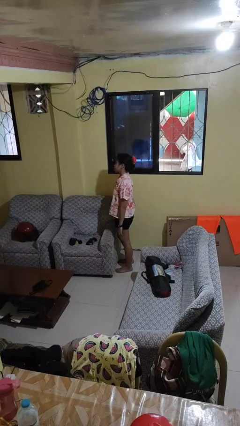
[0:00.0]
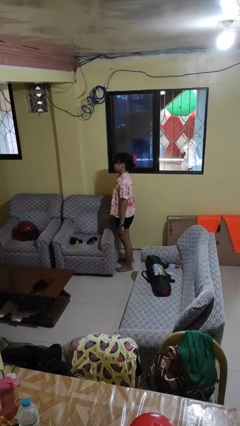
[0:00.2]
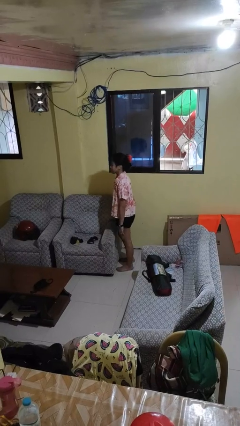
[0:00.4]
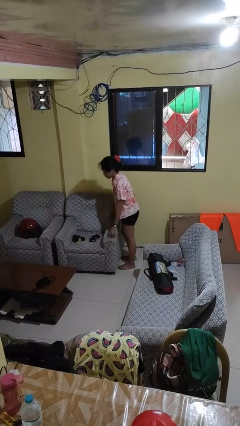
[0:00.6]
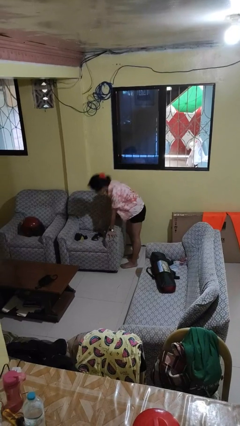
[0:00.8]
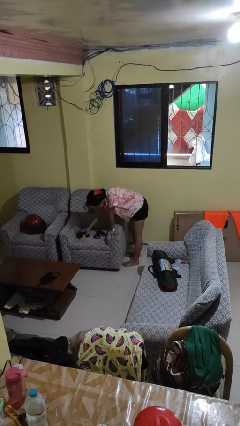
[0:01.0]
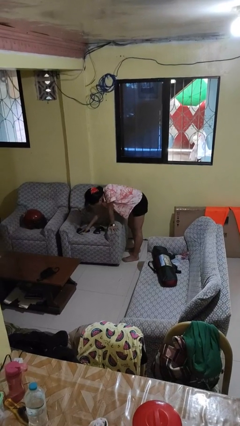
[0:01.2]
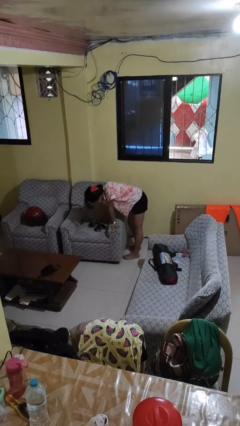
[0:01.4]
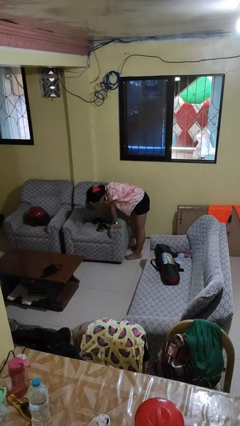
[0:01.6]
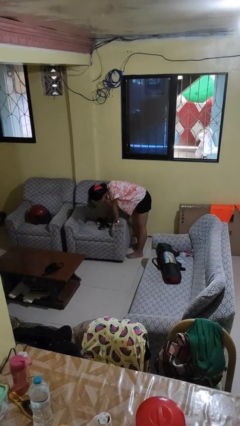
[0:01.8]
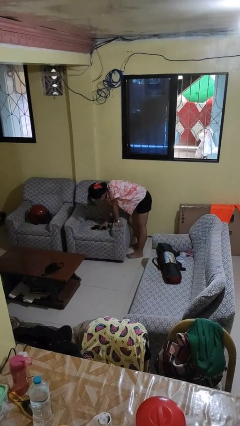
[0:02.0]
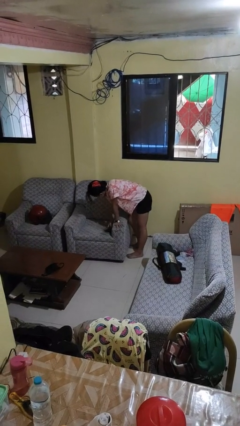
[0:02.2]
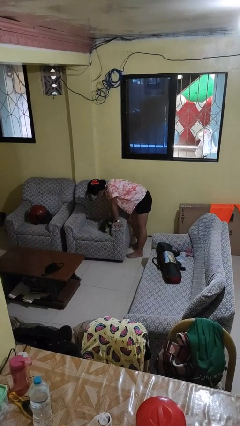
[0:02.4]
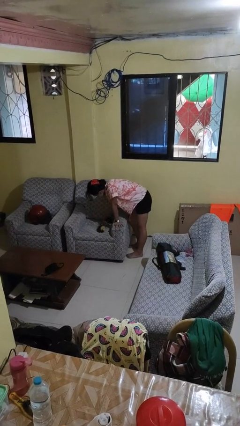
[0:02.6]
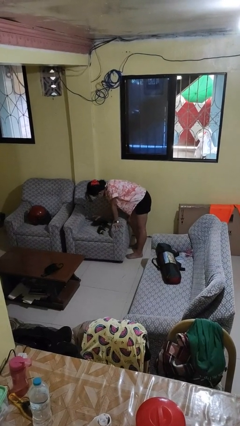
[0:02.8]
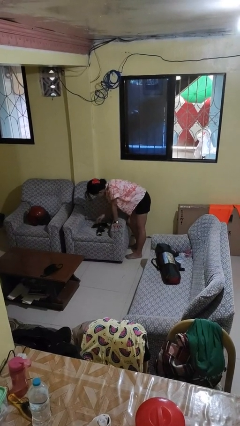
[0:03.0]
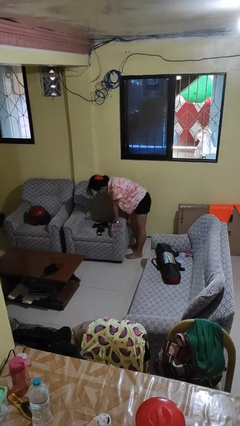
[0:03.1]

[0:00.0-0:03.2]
person searches under couch

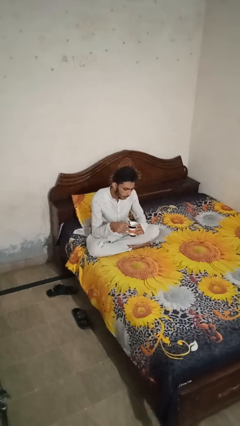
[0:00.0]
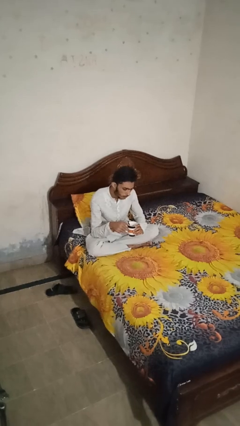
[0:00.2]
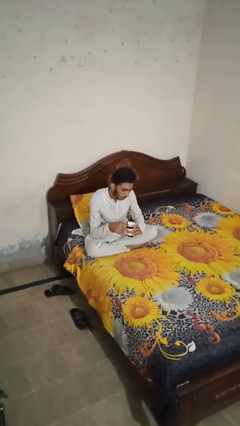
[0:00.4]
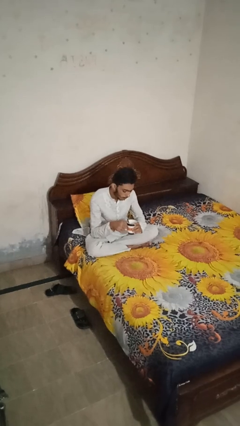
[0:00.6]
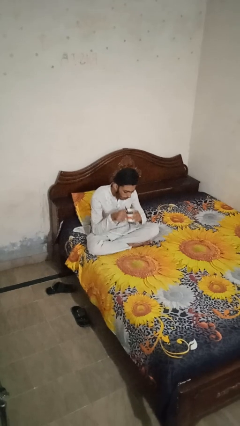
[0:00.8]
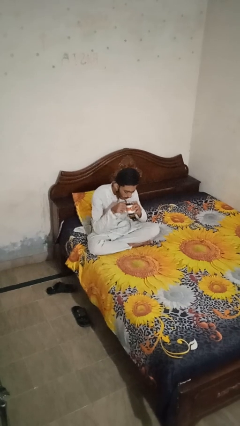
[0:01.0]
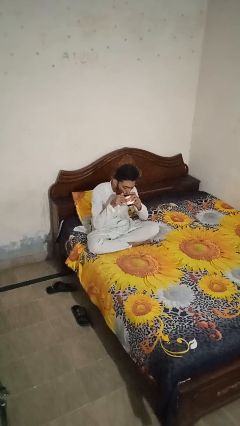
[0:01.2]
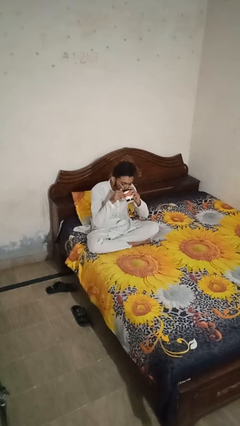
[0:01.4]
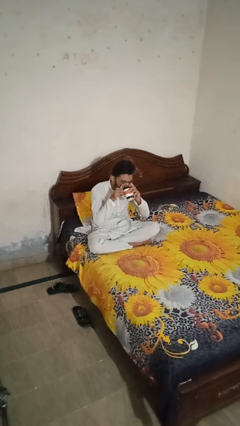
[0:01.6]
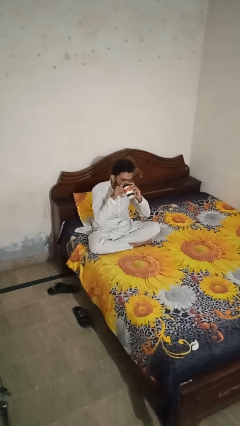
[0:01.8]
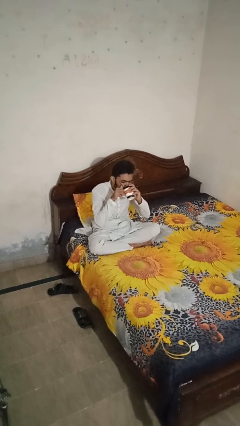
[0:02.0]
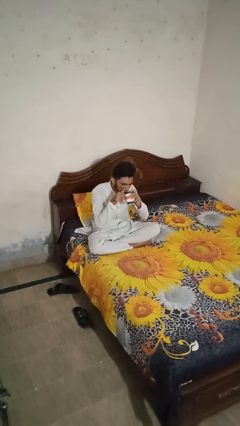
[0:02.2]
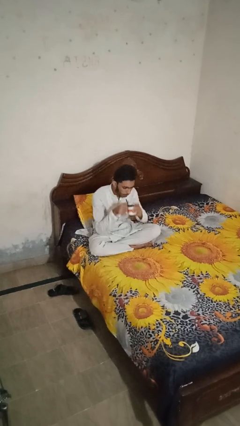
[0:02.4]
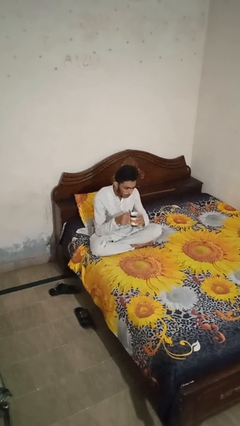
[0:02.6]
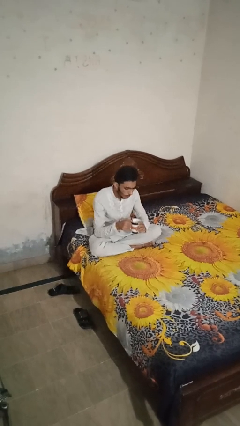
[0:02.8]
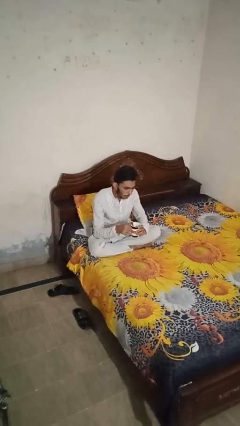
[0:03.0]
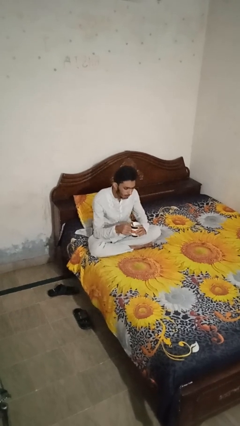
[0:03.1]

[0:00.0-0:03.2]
person drinks from mug

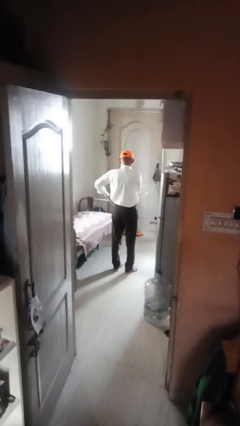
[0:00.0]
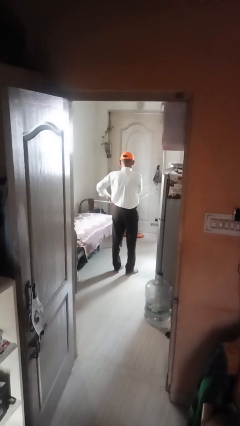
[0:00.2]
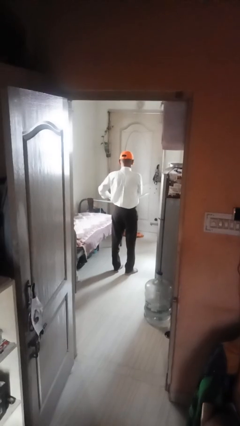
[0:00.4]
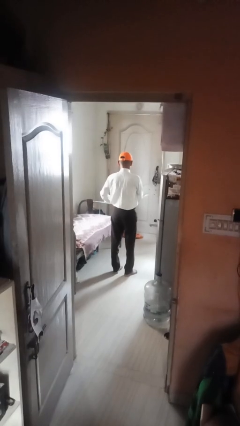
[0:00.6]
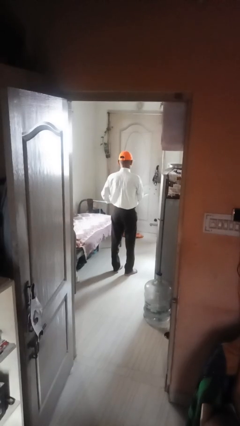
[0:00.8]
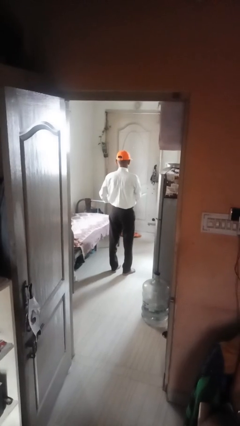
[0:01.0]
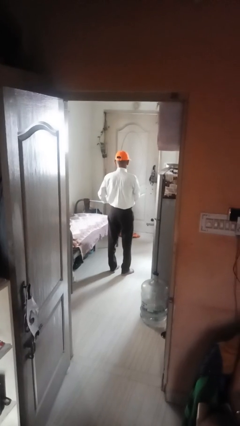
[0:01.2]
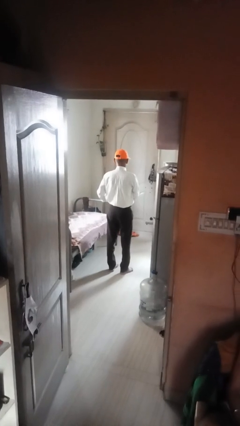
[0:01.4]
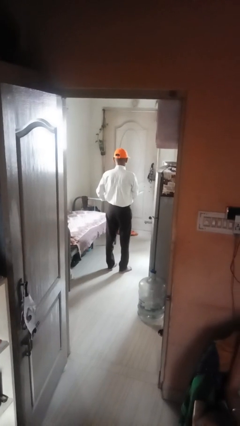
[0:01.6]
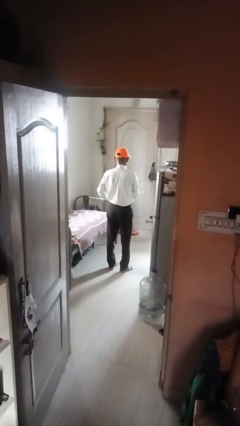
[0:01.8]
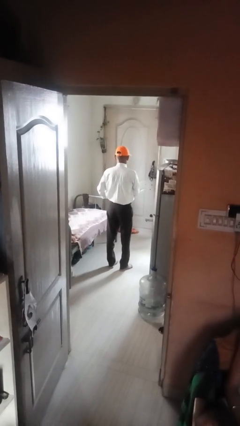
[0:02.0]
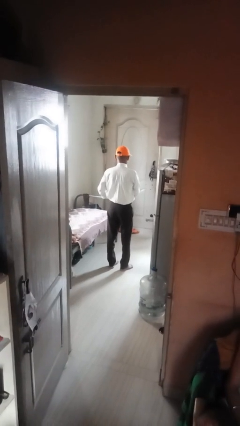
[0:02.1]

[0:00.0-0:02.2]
person gestures heart

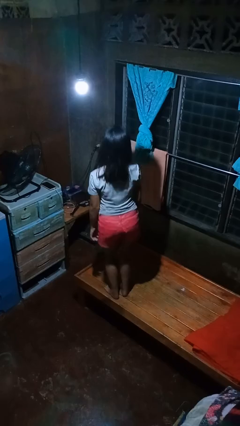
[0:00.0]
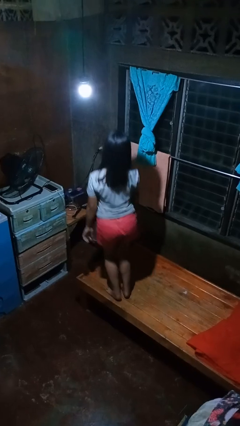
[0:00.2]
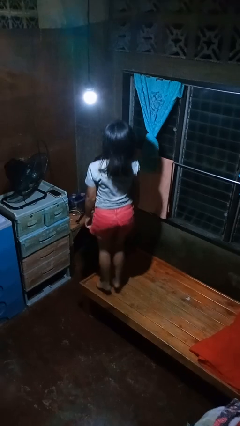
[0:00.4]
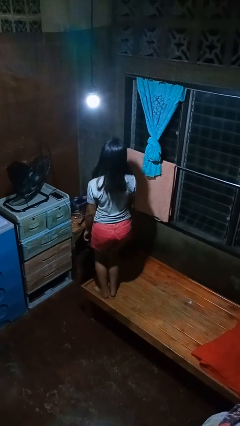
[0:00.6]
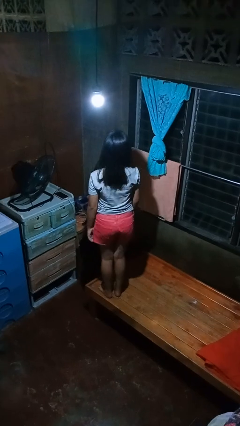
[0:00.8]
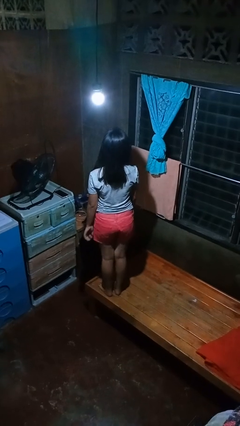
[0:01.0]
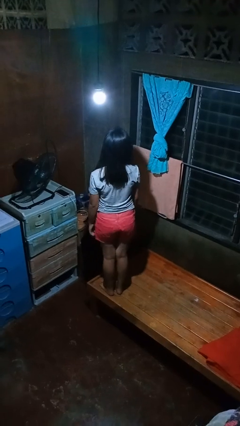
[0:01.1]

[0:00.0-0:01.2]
person jumps on bed

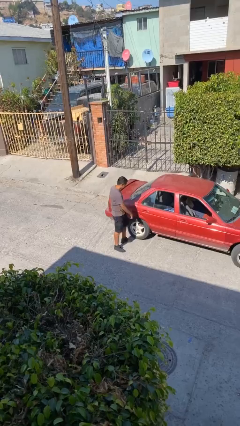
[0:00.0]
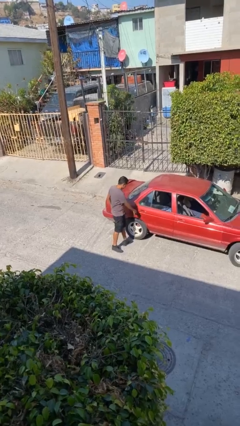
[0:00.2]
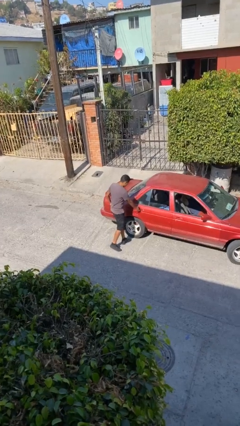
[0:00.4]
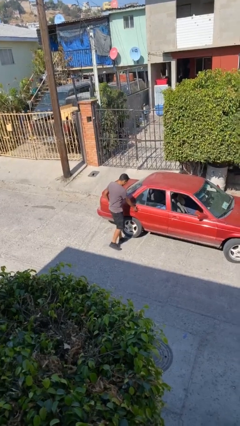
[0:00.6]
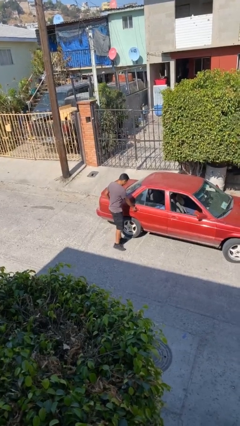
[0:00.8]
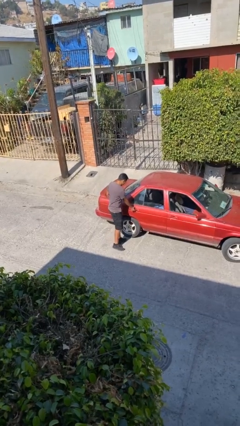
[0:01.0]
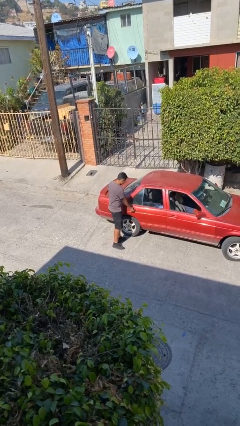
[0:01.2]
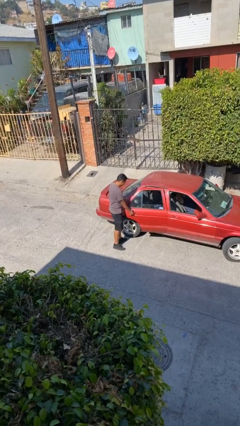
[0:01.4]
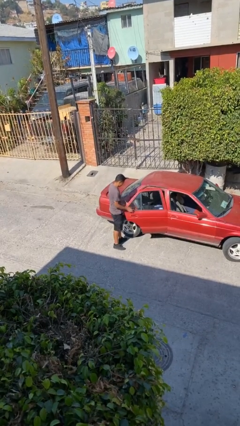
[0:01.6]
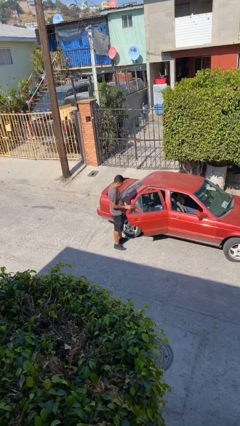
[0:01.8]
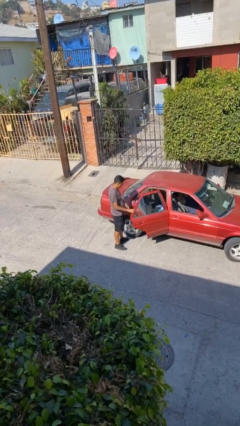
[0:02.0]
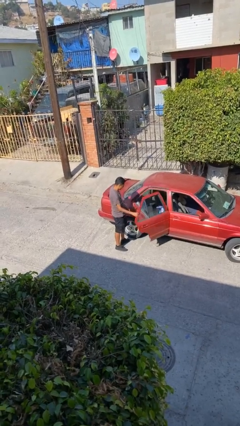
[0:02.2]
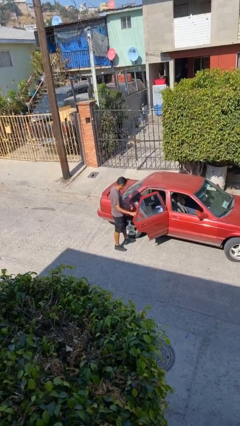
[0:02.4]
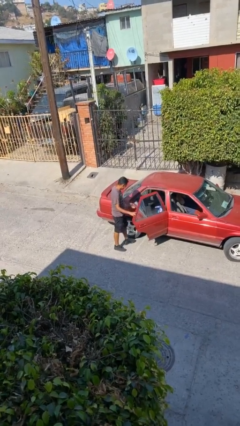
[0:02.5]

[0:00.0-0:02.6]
person opens car door

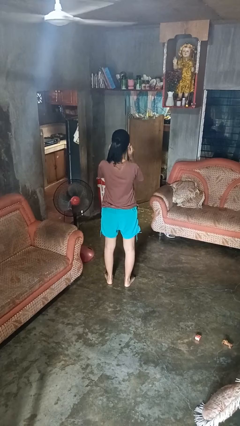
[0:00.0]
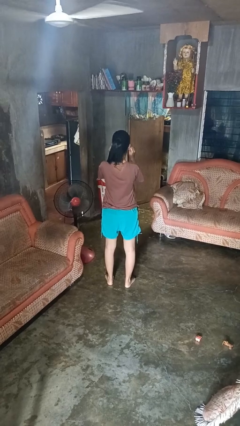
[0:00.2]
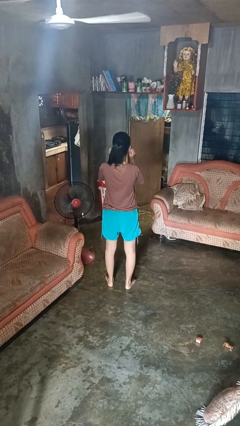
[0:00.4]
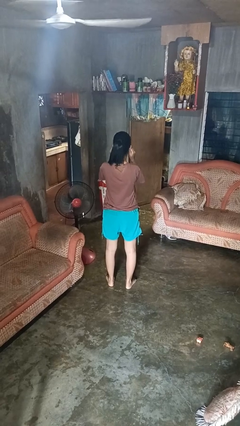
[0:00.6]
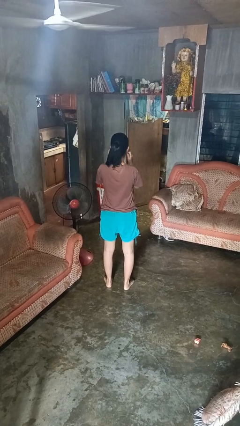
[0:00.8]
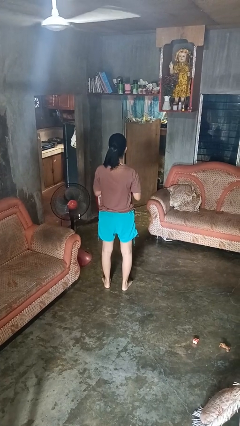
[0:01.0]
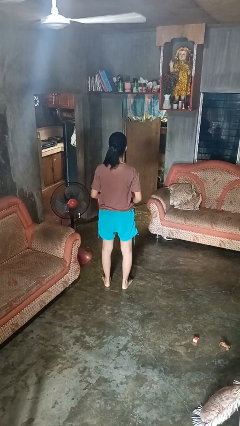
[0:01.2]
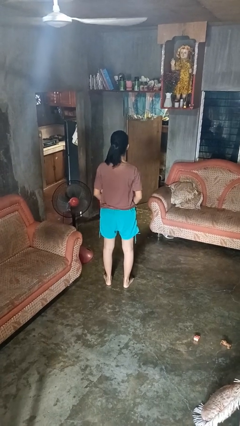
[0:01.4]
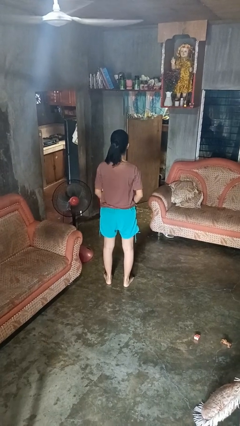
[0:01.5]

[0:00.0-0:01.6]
person touches earlobe

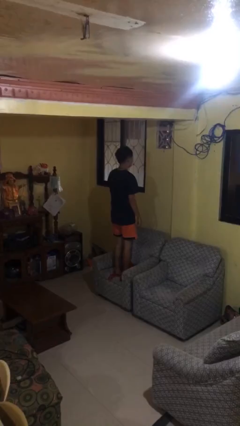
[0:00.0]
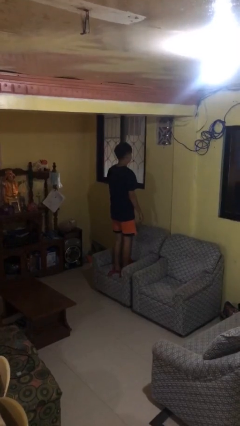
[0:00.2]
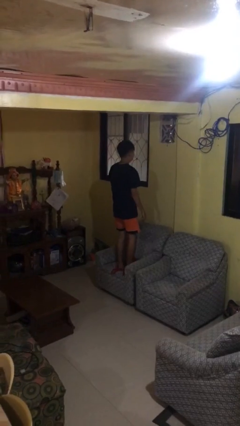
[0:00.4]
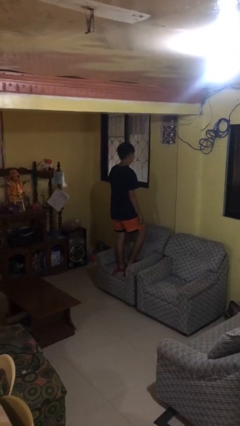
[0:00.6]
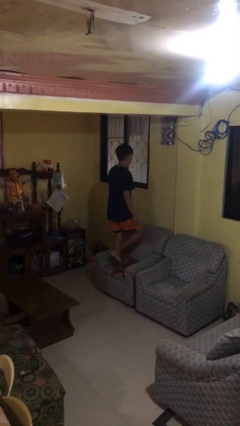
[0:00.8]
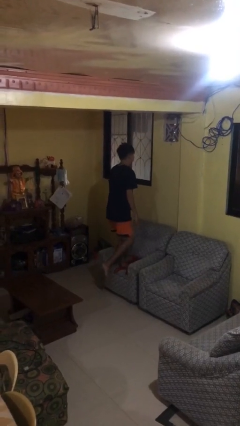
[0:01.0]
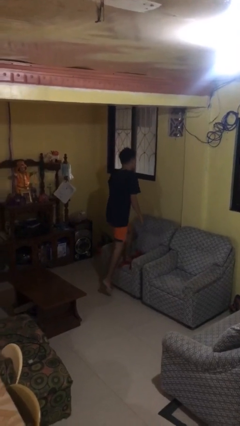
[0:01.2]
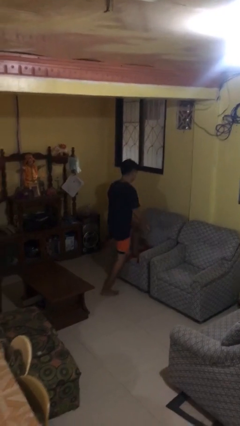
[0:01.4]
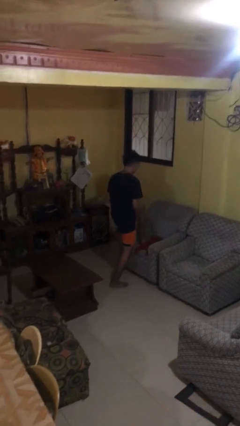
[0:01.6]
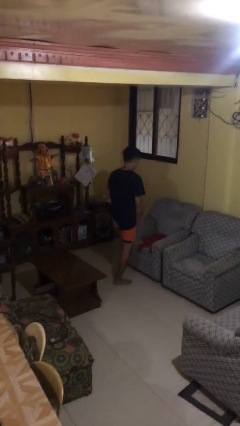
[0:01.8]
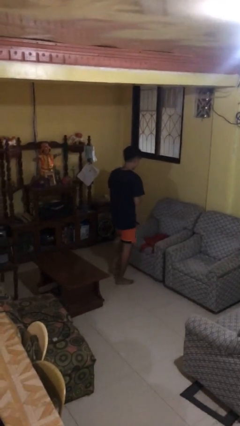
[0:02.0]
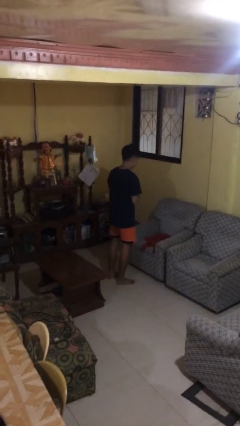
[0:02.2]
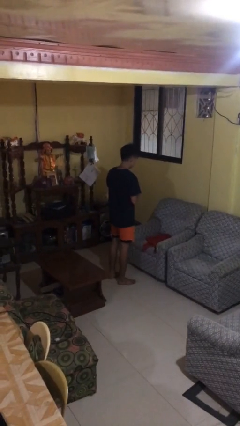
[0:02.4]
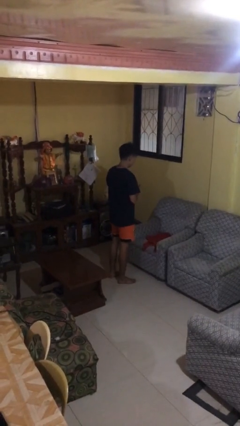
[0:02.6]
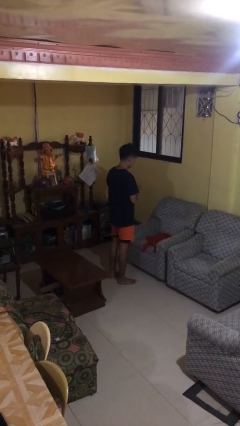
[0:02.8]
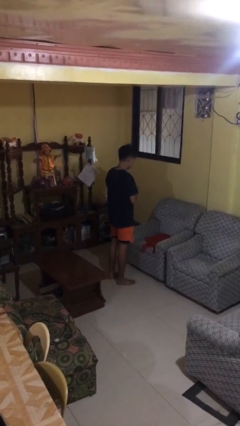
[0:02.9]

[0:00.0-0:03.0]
person climbs off couch

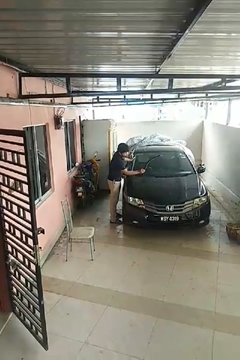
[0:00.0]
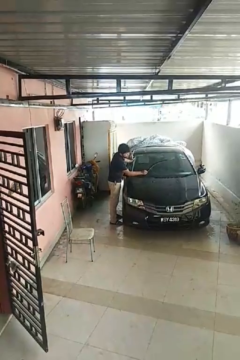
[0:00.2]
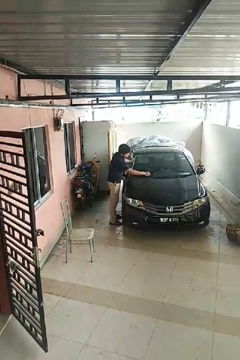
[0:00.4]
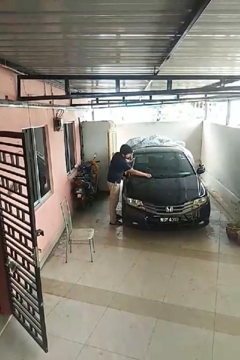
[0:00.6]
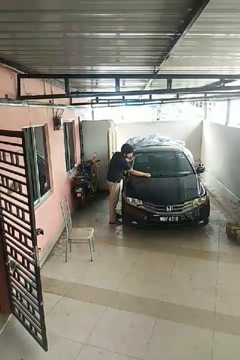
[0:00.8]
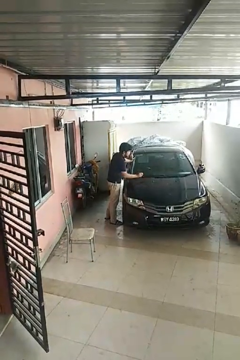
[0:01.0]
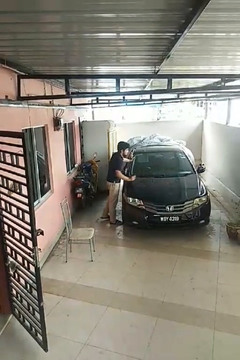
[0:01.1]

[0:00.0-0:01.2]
person flips down car wipers
